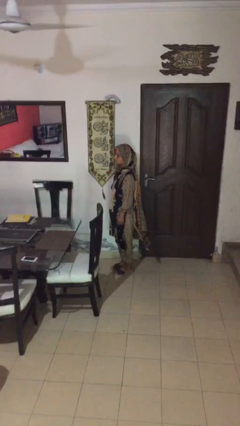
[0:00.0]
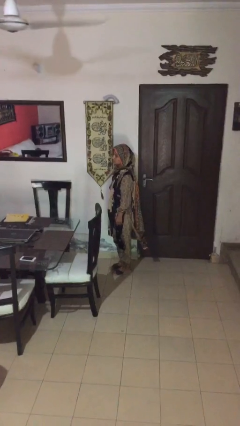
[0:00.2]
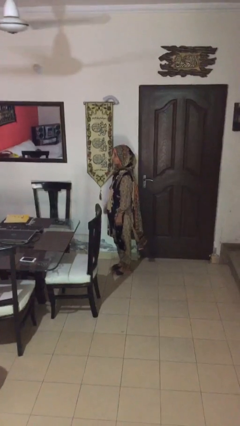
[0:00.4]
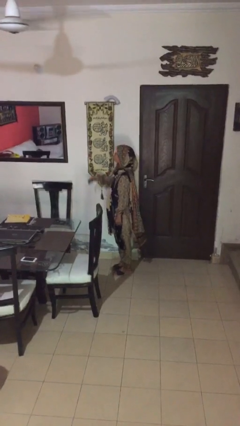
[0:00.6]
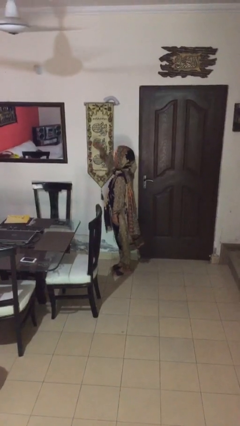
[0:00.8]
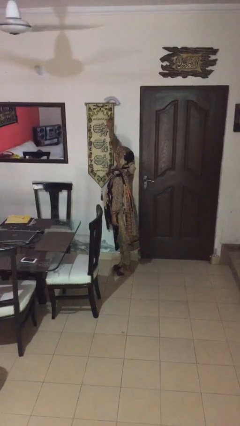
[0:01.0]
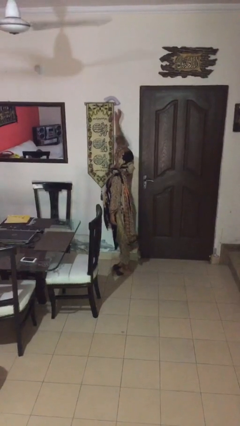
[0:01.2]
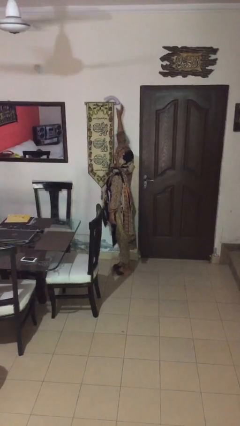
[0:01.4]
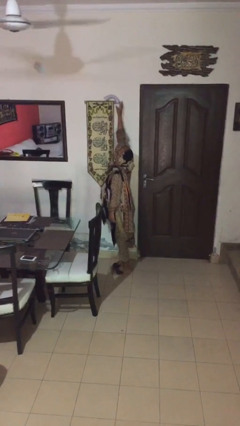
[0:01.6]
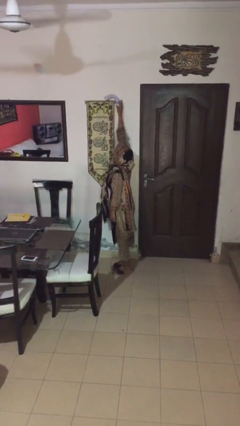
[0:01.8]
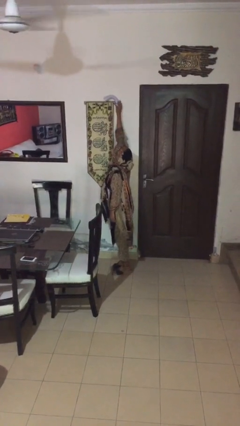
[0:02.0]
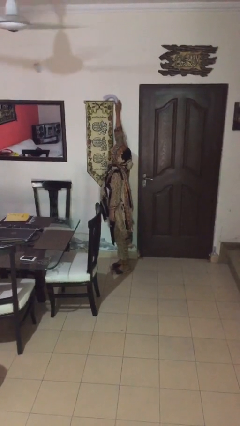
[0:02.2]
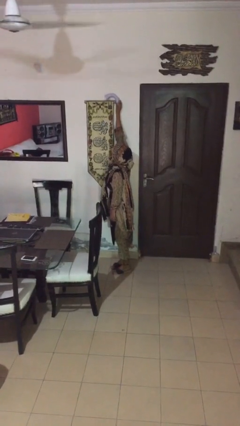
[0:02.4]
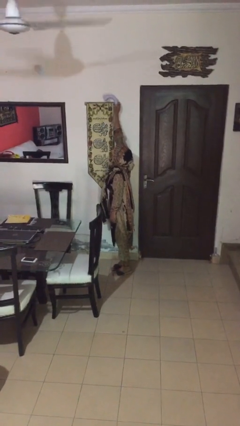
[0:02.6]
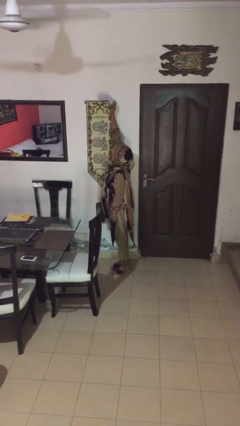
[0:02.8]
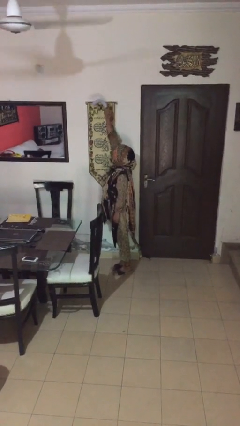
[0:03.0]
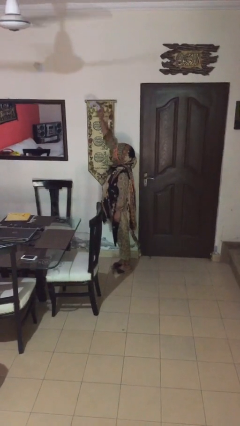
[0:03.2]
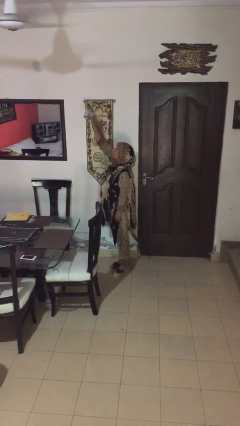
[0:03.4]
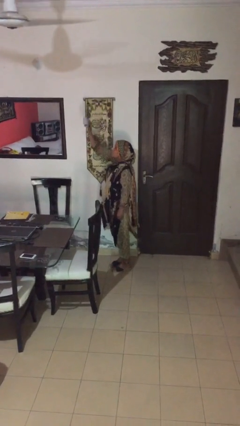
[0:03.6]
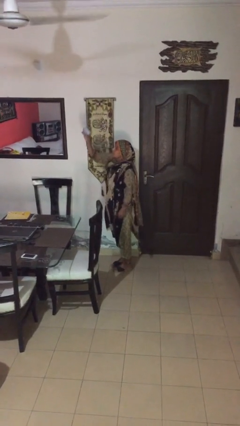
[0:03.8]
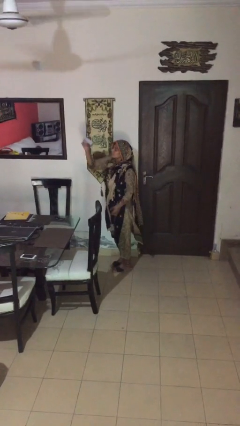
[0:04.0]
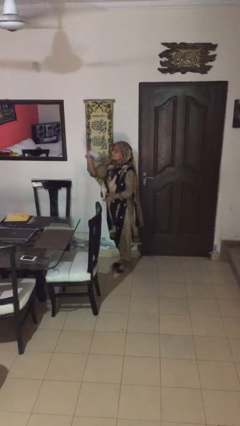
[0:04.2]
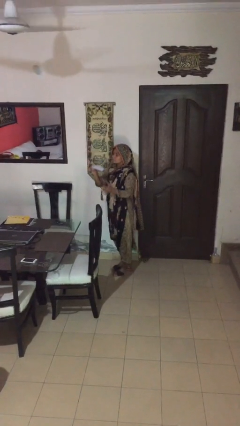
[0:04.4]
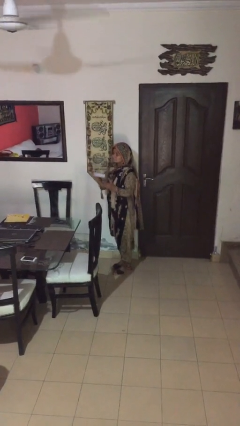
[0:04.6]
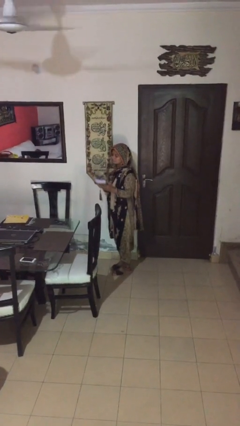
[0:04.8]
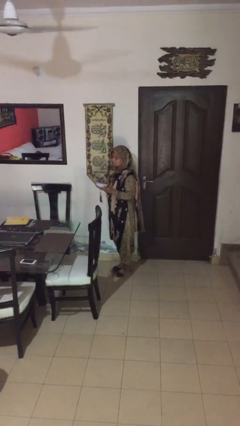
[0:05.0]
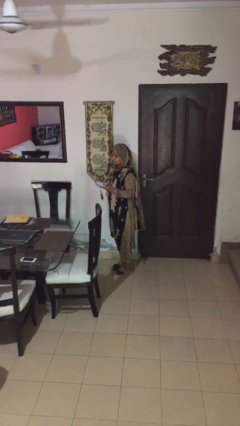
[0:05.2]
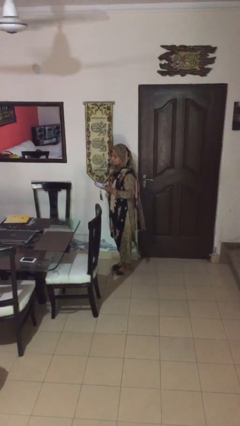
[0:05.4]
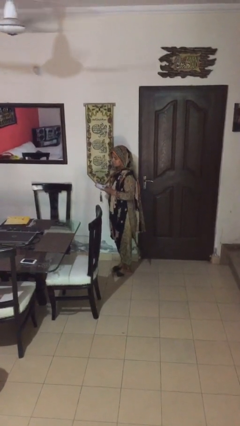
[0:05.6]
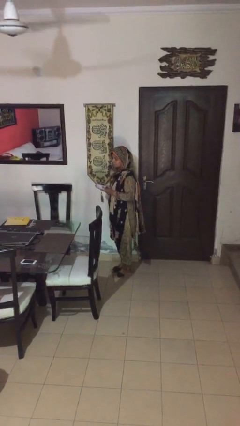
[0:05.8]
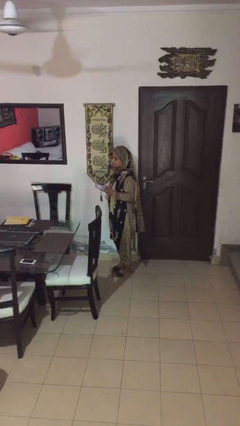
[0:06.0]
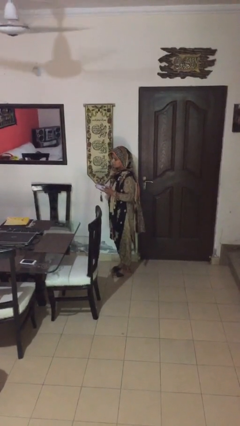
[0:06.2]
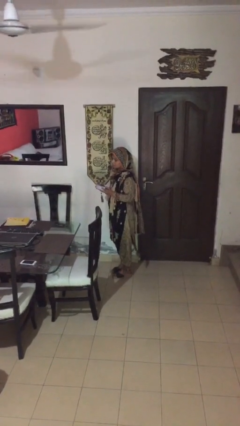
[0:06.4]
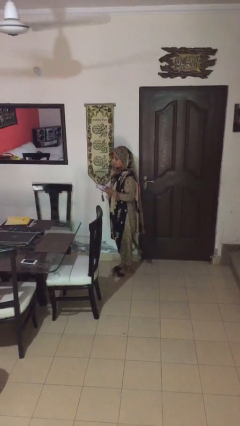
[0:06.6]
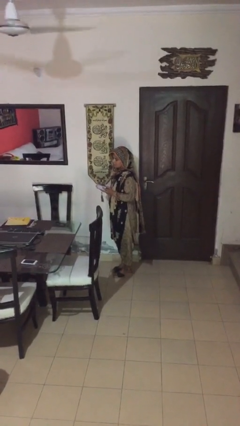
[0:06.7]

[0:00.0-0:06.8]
person picks up object from table

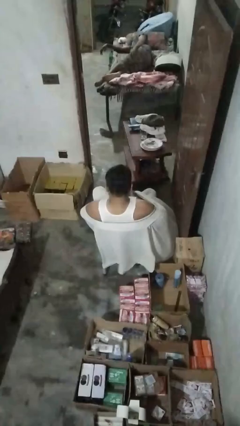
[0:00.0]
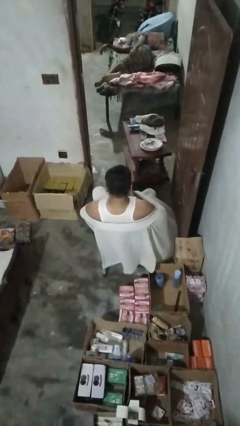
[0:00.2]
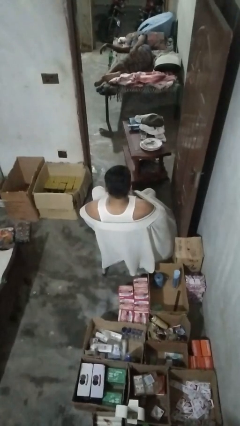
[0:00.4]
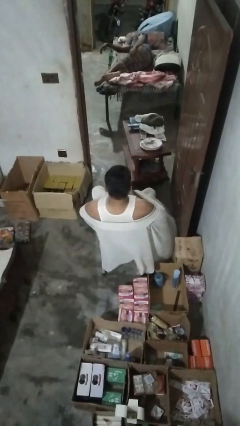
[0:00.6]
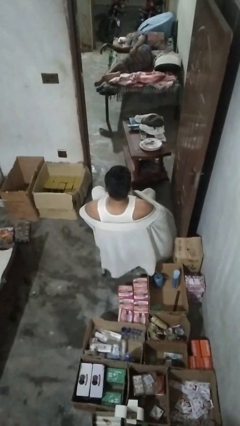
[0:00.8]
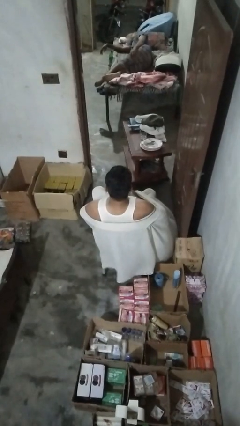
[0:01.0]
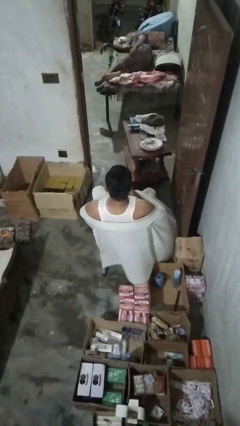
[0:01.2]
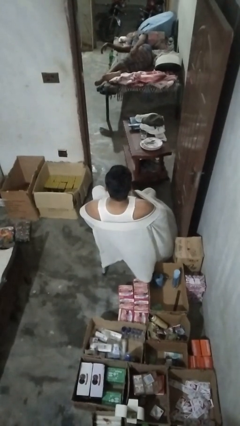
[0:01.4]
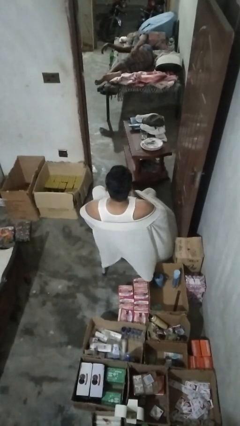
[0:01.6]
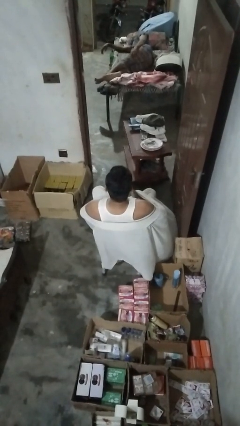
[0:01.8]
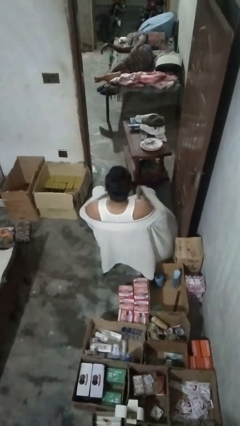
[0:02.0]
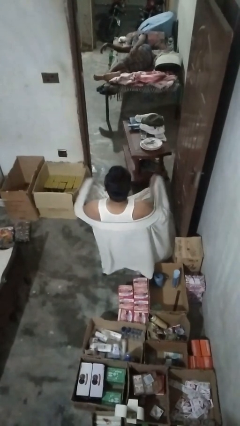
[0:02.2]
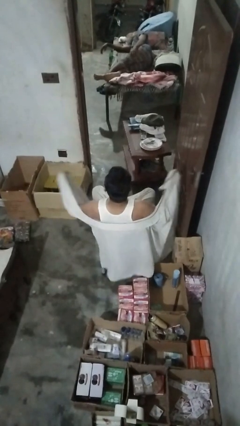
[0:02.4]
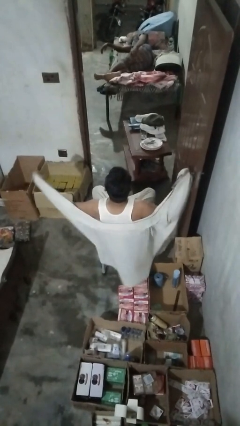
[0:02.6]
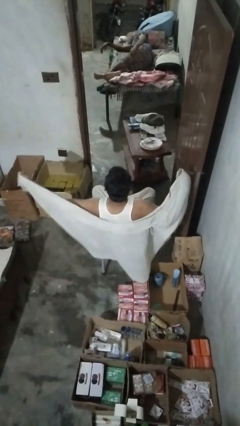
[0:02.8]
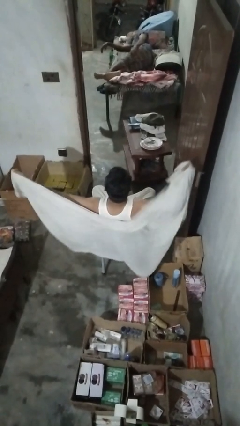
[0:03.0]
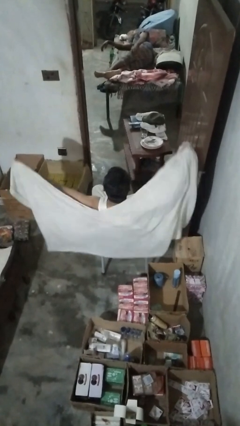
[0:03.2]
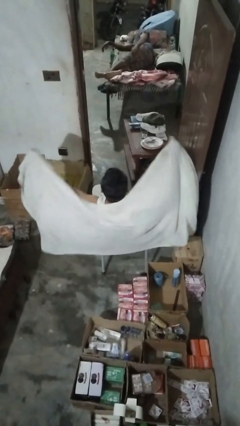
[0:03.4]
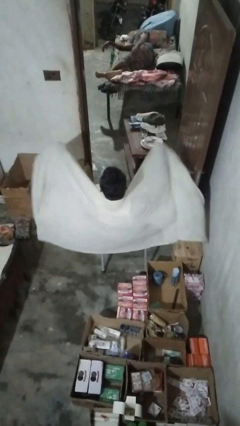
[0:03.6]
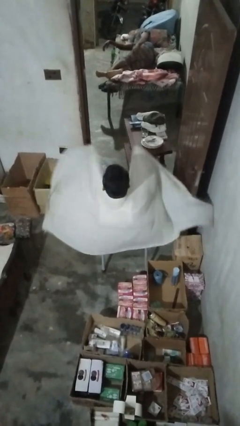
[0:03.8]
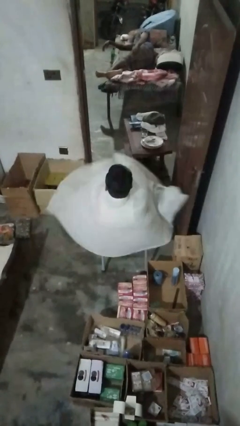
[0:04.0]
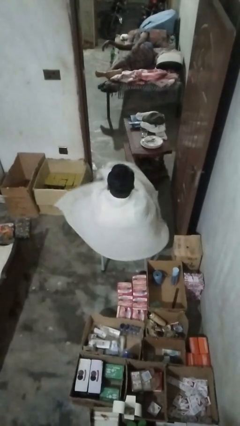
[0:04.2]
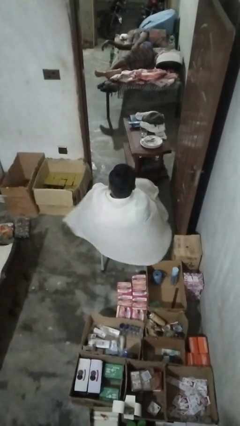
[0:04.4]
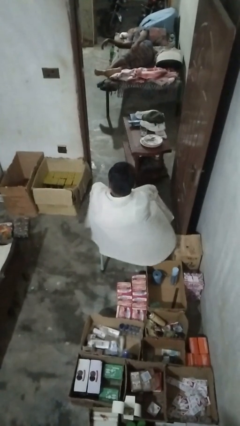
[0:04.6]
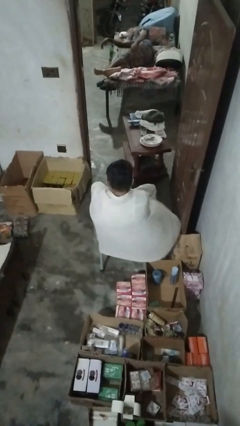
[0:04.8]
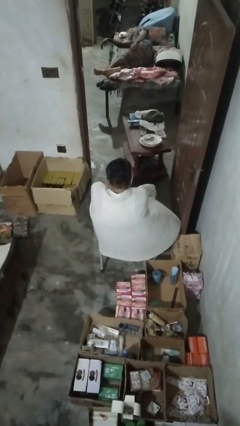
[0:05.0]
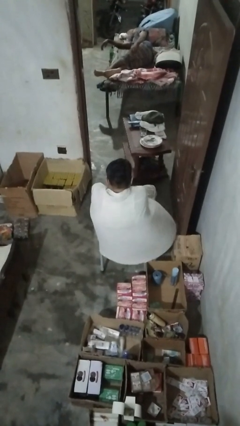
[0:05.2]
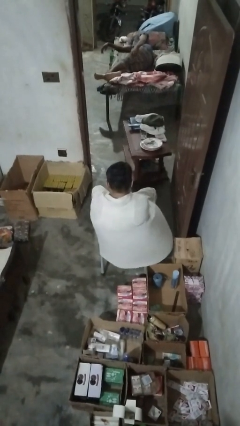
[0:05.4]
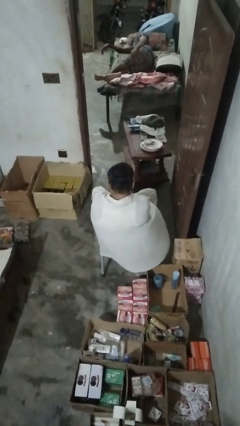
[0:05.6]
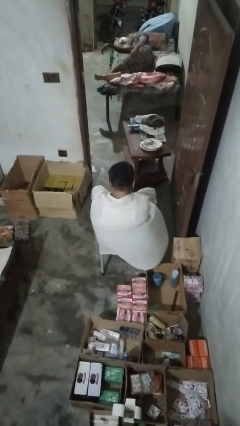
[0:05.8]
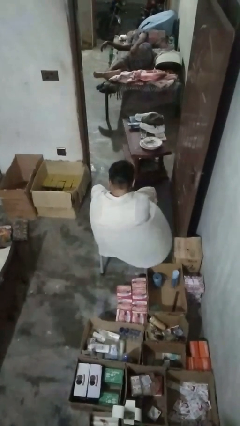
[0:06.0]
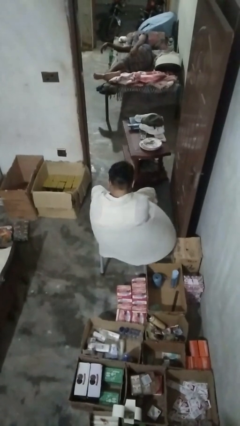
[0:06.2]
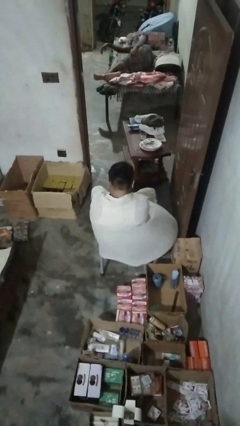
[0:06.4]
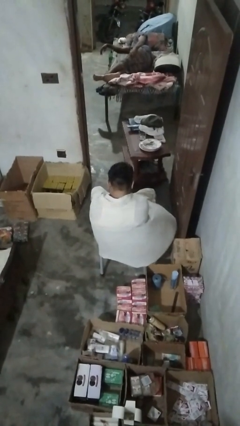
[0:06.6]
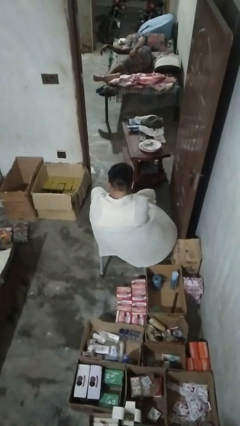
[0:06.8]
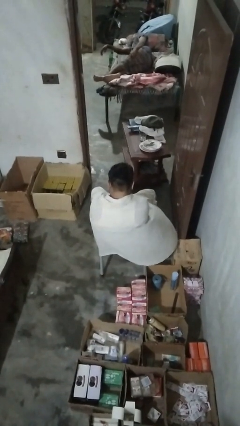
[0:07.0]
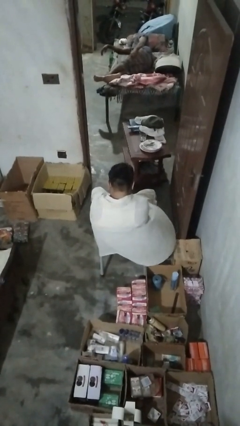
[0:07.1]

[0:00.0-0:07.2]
person covers with blanket

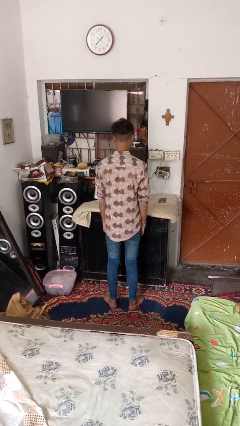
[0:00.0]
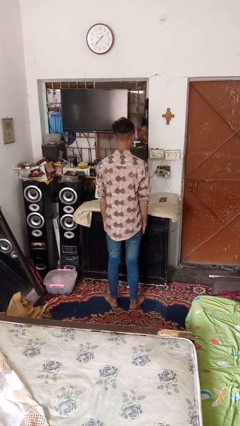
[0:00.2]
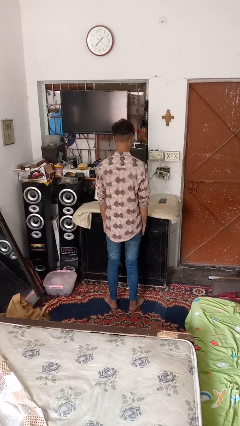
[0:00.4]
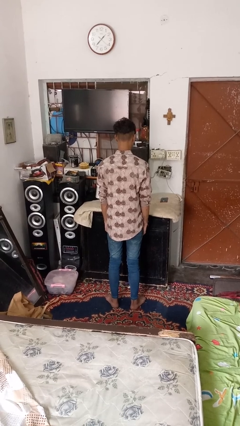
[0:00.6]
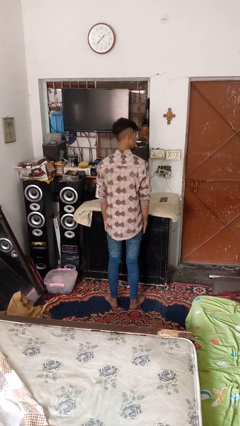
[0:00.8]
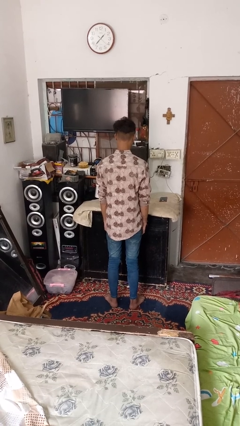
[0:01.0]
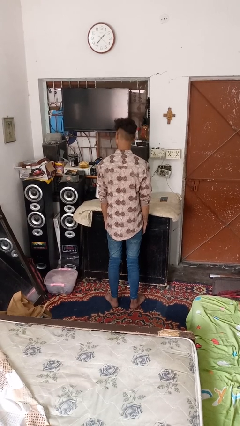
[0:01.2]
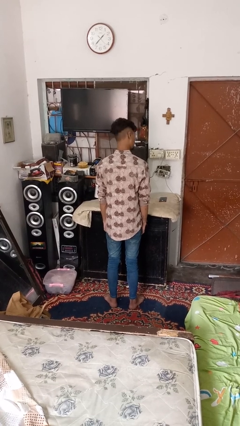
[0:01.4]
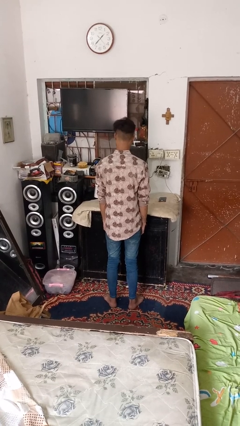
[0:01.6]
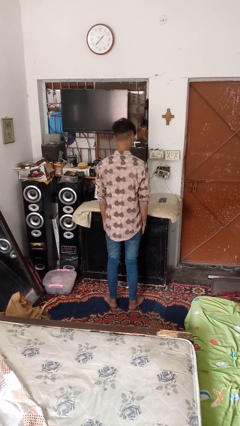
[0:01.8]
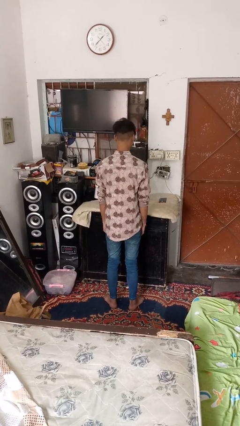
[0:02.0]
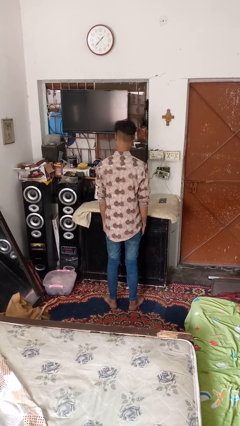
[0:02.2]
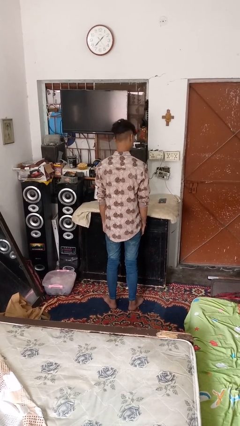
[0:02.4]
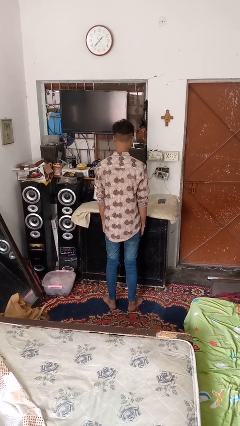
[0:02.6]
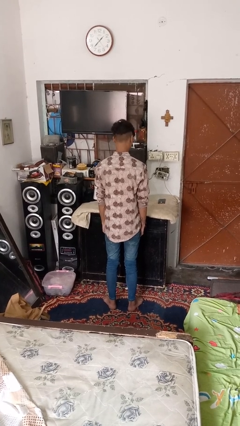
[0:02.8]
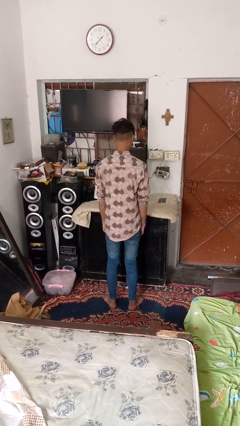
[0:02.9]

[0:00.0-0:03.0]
person shakes head

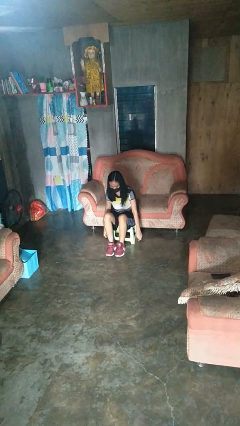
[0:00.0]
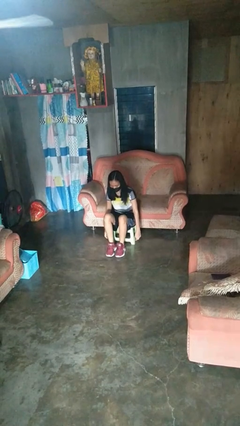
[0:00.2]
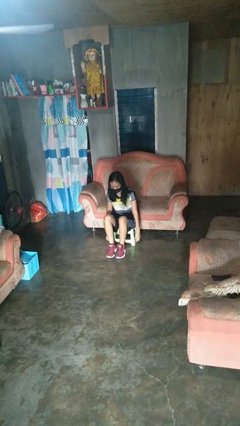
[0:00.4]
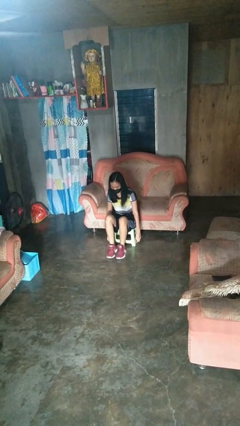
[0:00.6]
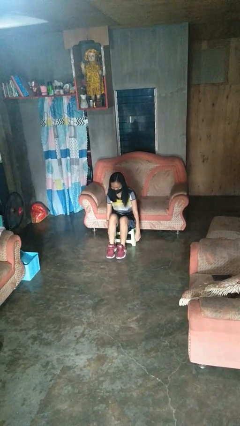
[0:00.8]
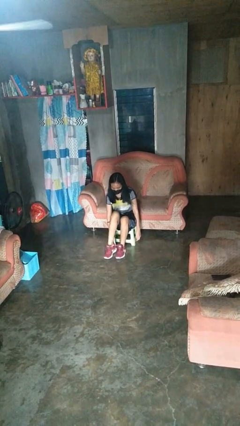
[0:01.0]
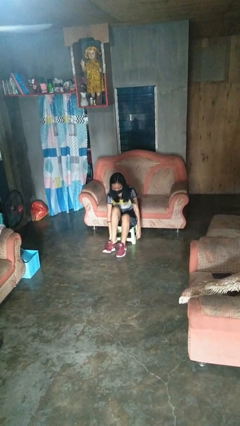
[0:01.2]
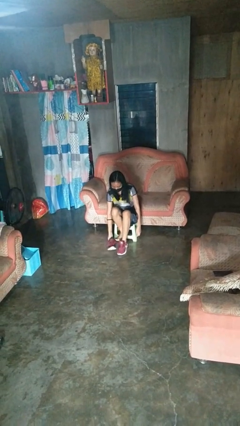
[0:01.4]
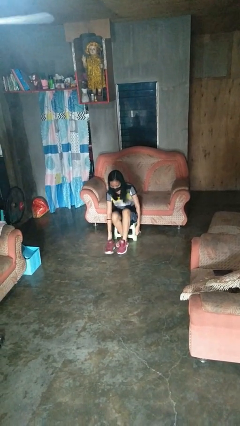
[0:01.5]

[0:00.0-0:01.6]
person takes off shoes
